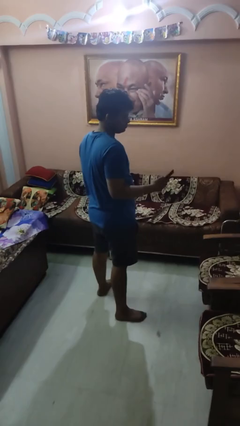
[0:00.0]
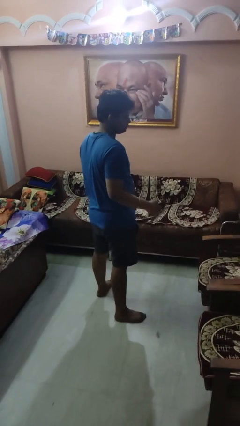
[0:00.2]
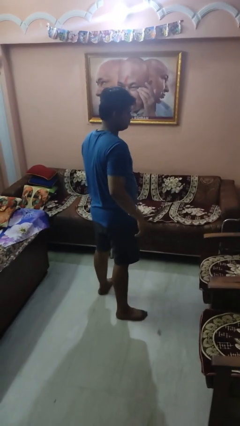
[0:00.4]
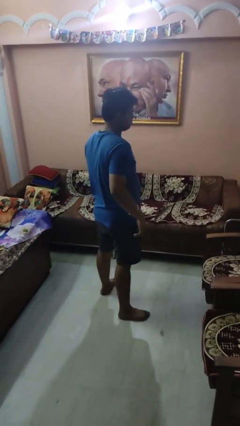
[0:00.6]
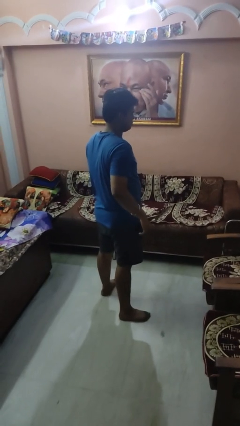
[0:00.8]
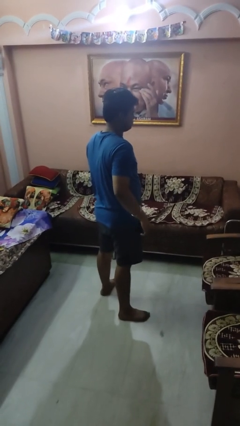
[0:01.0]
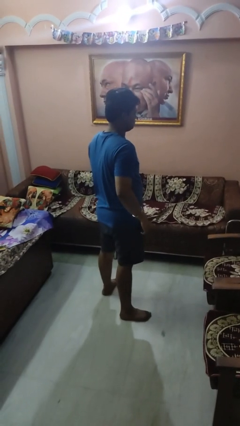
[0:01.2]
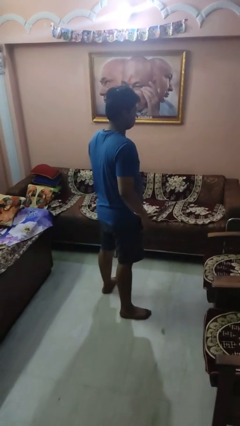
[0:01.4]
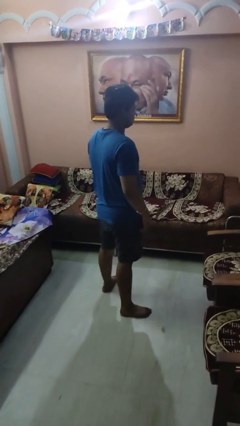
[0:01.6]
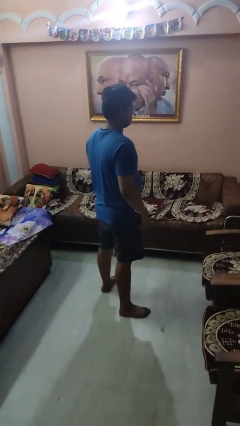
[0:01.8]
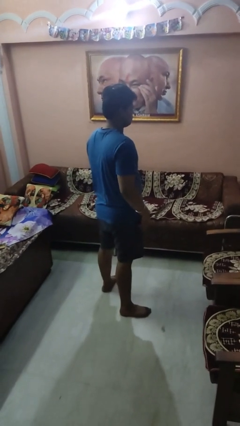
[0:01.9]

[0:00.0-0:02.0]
person puts phone into pocket

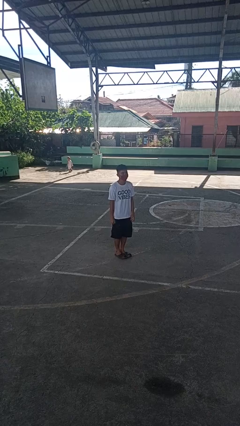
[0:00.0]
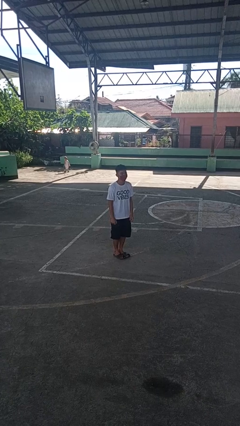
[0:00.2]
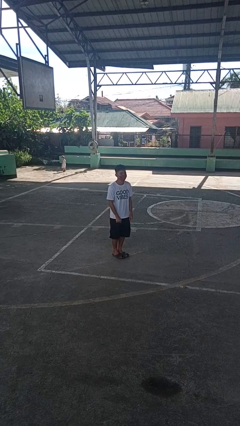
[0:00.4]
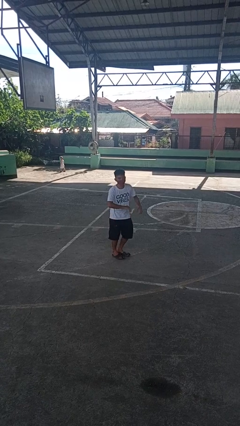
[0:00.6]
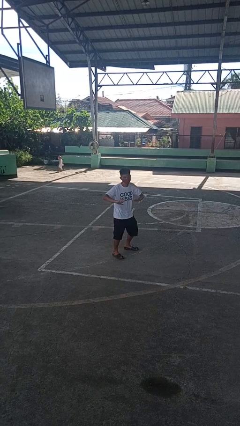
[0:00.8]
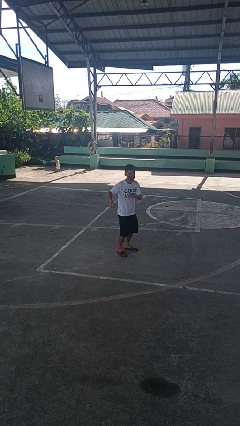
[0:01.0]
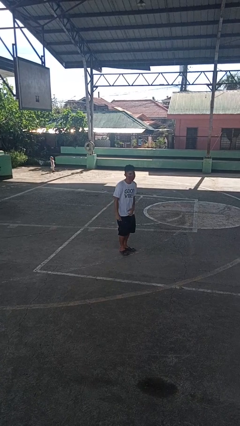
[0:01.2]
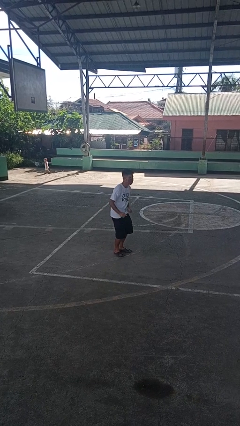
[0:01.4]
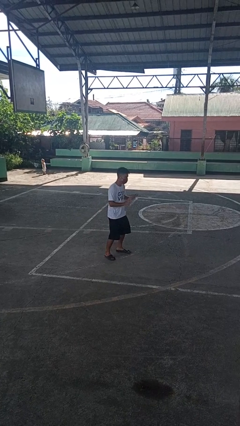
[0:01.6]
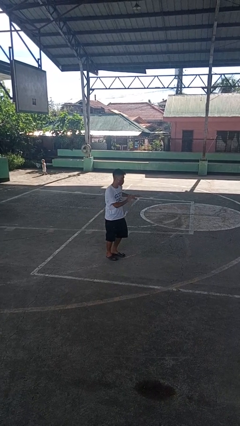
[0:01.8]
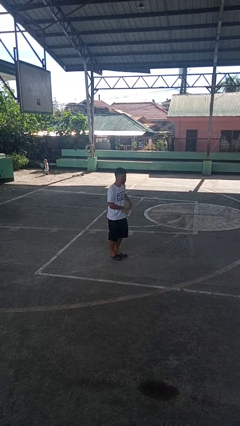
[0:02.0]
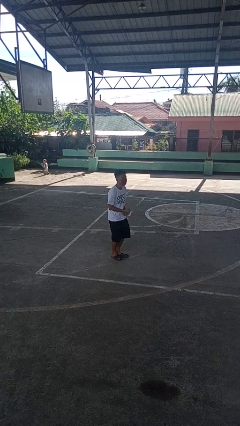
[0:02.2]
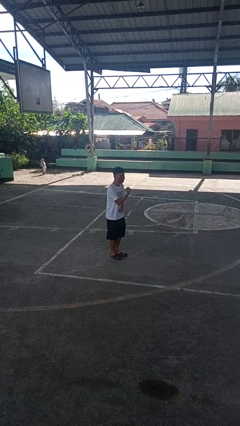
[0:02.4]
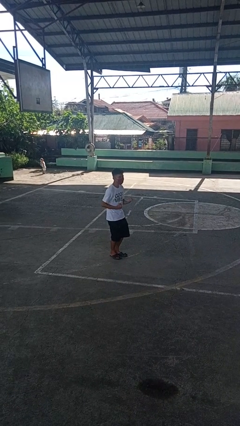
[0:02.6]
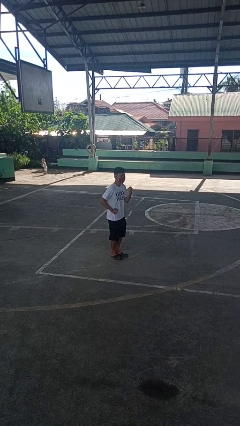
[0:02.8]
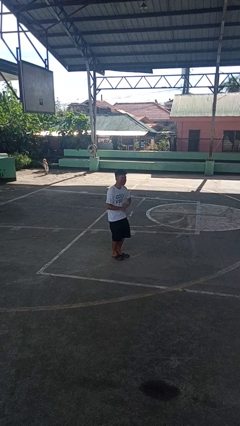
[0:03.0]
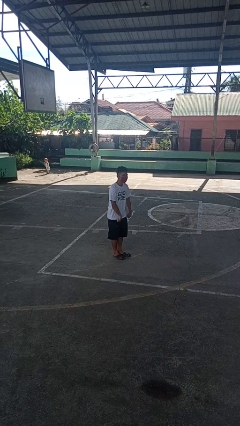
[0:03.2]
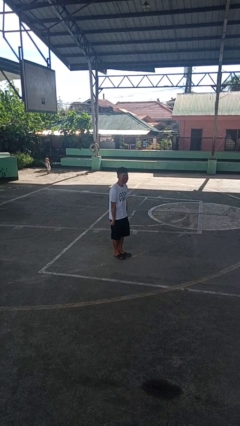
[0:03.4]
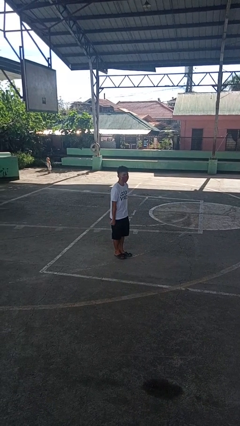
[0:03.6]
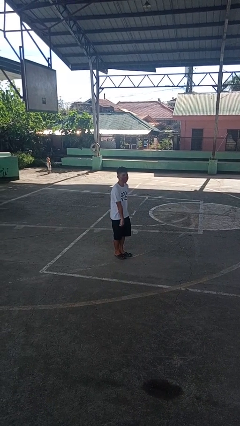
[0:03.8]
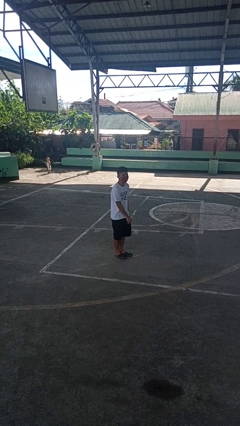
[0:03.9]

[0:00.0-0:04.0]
person dances in place

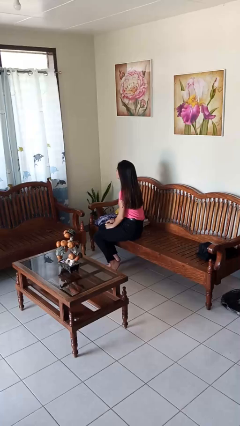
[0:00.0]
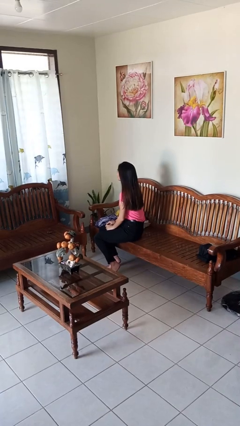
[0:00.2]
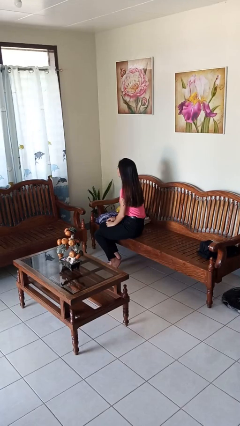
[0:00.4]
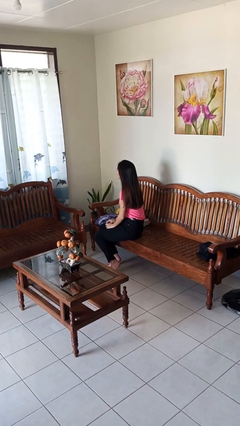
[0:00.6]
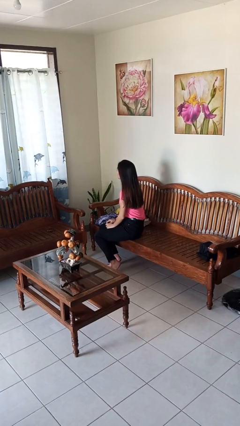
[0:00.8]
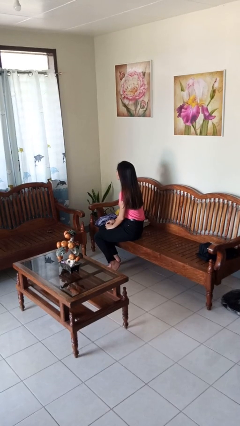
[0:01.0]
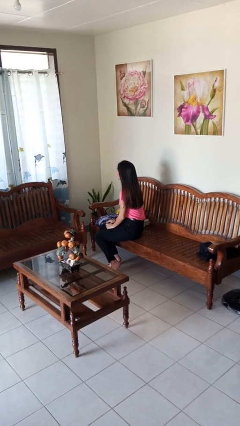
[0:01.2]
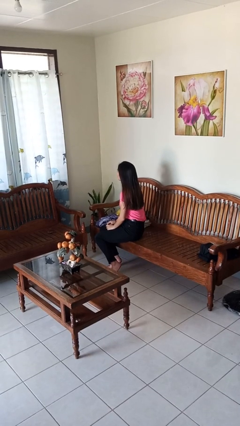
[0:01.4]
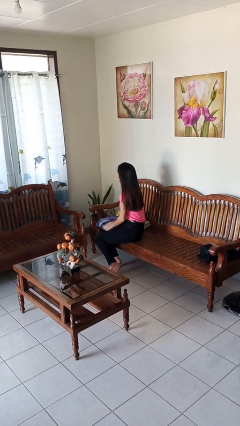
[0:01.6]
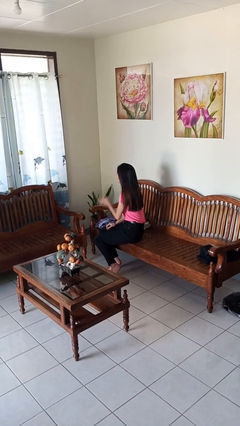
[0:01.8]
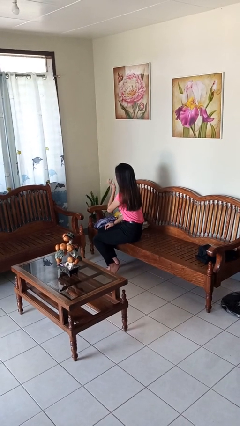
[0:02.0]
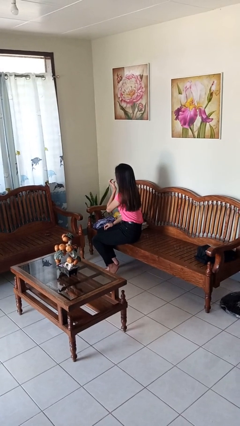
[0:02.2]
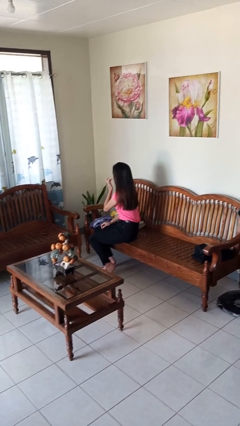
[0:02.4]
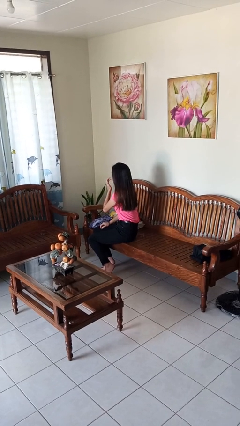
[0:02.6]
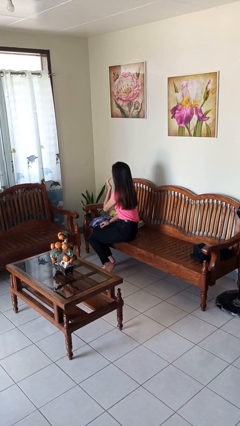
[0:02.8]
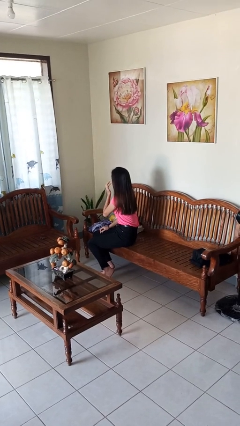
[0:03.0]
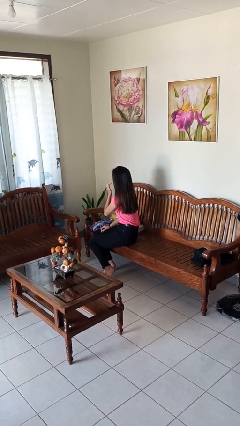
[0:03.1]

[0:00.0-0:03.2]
person licks fingers

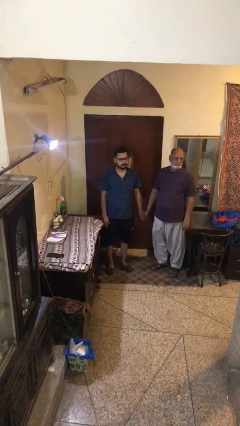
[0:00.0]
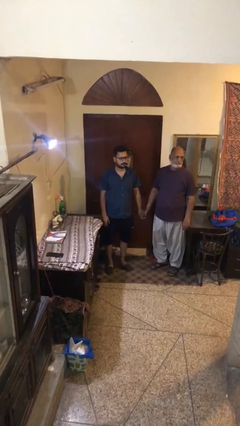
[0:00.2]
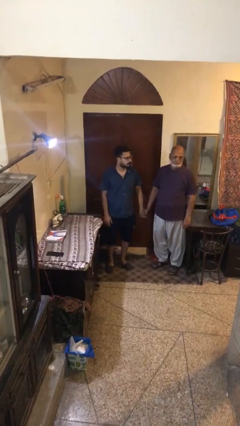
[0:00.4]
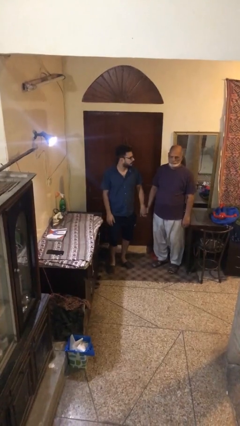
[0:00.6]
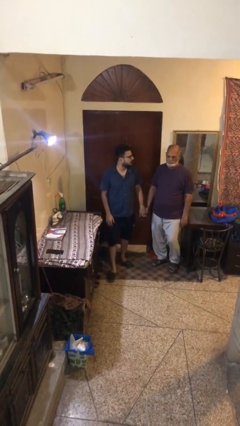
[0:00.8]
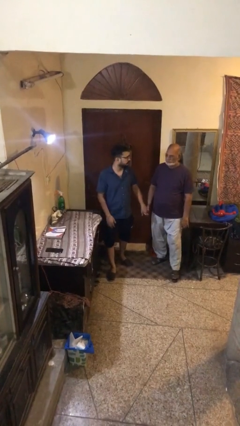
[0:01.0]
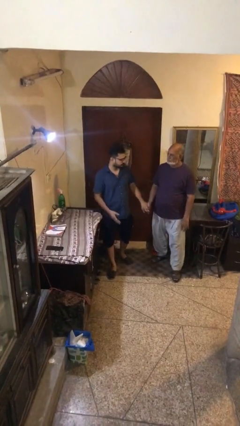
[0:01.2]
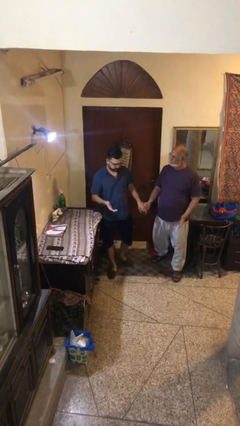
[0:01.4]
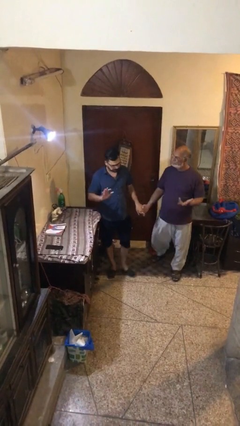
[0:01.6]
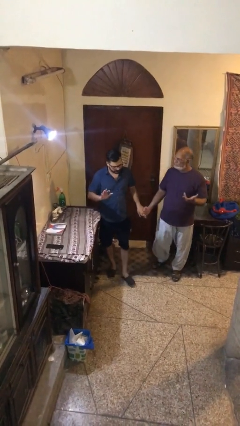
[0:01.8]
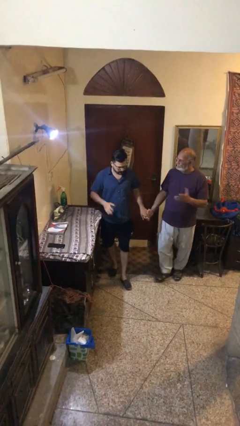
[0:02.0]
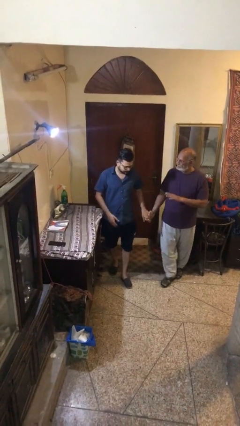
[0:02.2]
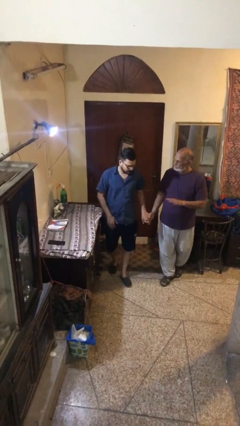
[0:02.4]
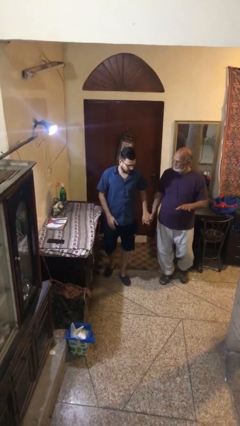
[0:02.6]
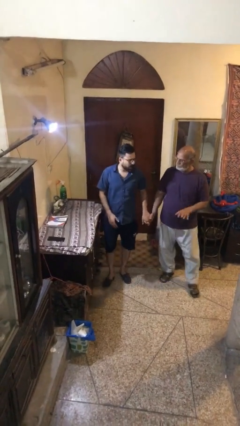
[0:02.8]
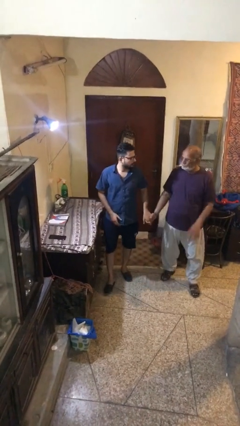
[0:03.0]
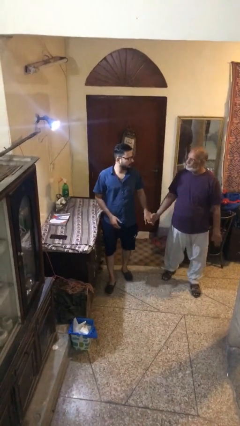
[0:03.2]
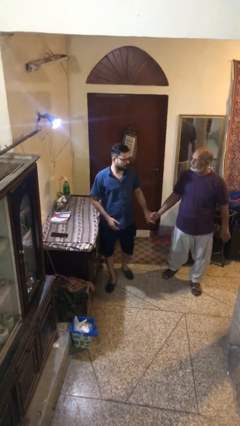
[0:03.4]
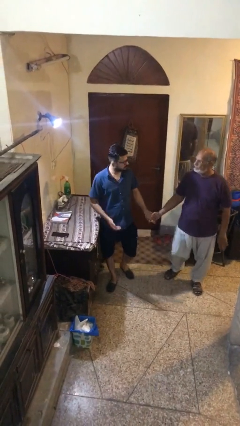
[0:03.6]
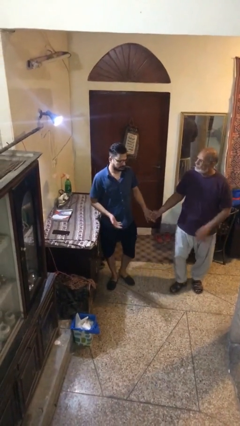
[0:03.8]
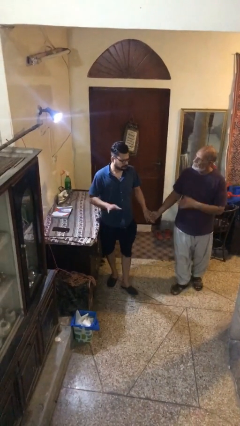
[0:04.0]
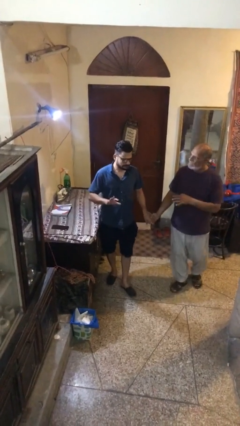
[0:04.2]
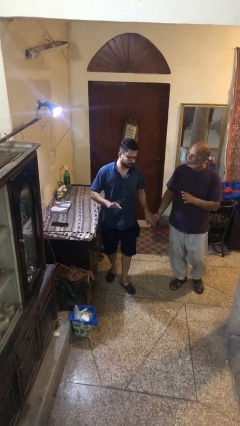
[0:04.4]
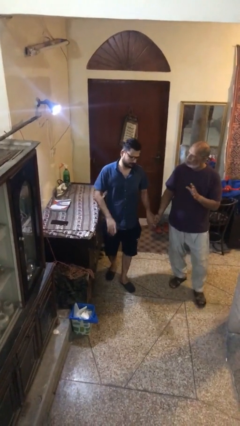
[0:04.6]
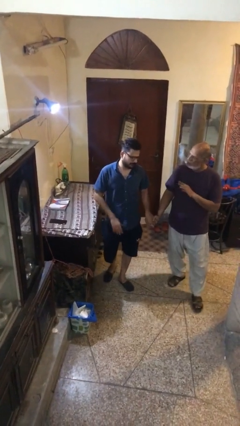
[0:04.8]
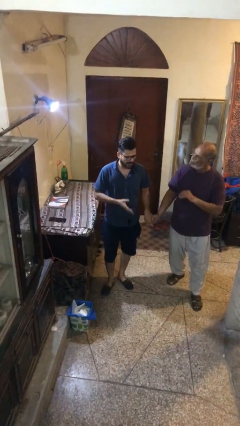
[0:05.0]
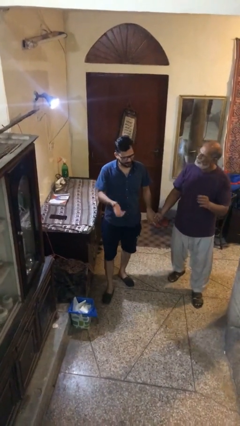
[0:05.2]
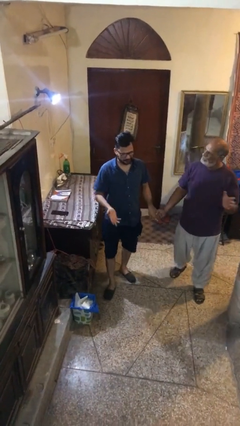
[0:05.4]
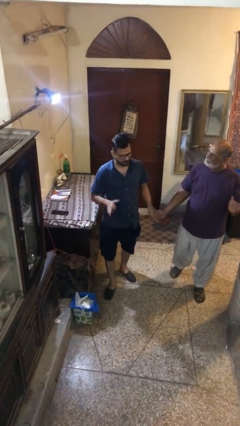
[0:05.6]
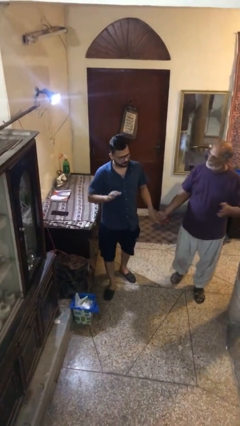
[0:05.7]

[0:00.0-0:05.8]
person holds hand

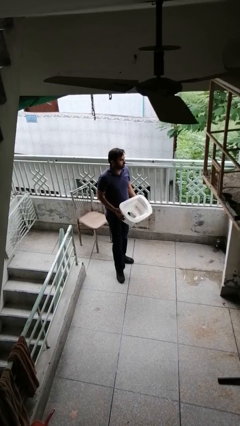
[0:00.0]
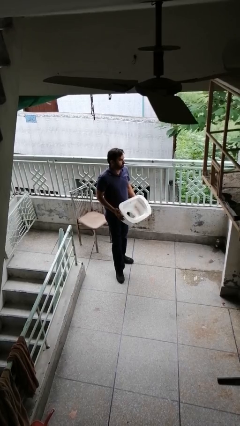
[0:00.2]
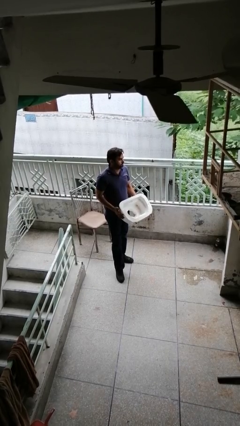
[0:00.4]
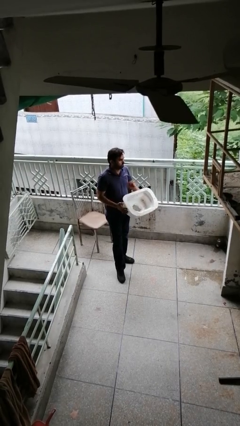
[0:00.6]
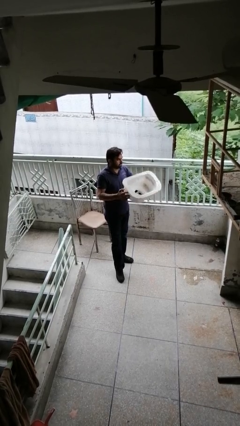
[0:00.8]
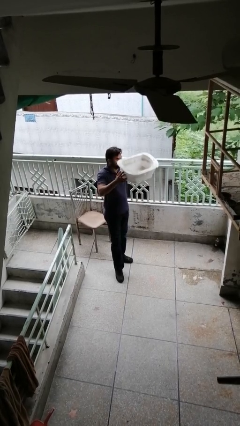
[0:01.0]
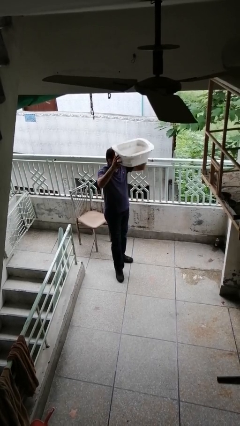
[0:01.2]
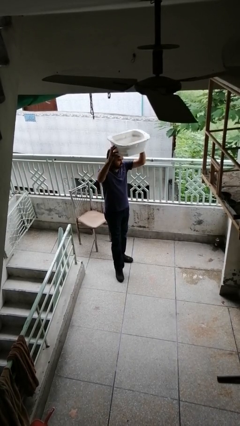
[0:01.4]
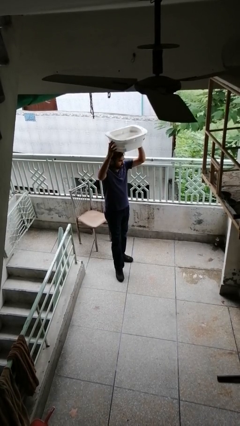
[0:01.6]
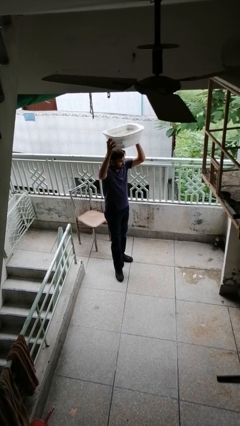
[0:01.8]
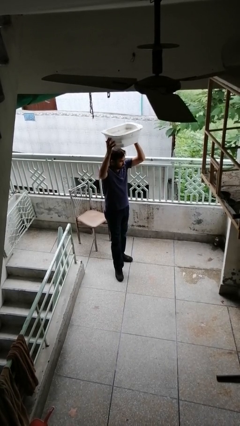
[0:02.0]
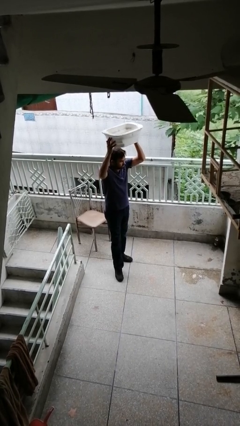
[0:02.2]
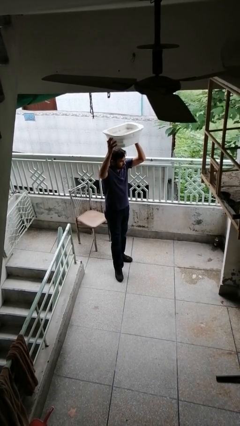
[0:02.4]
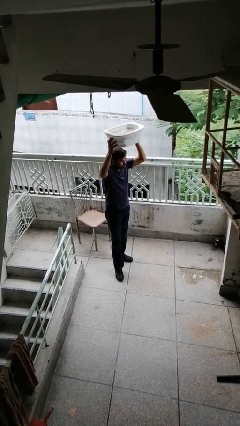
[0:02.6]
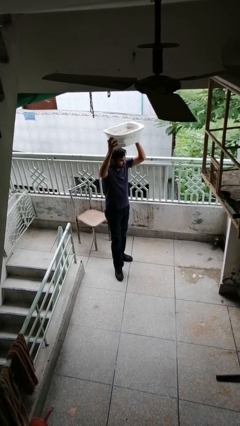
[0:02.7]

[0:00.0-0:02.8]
person holds object above head
